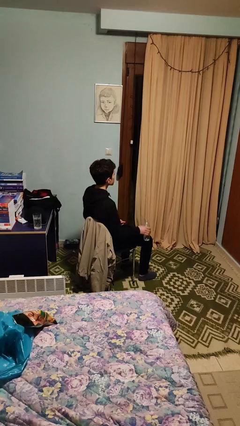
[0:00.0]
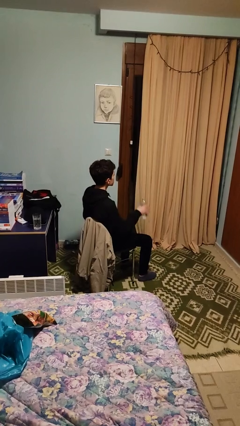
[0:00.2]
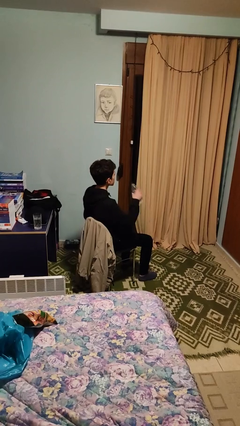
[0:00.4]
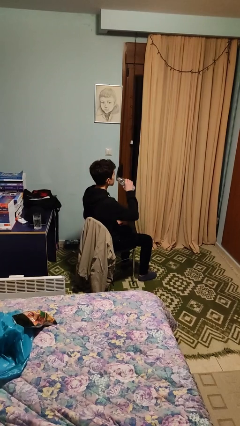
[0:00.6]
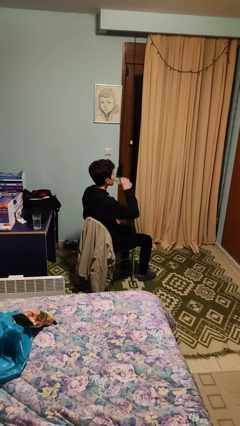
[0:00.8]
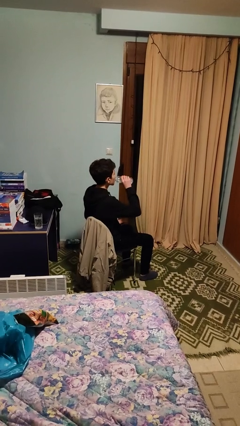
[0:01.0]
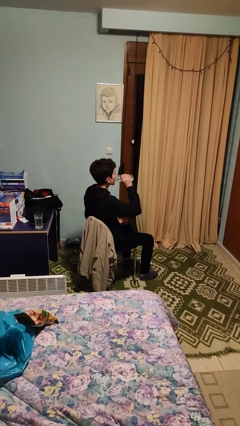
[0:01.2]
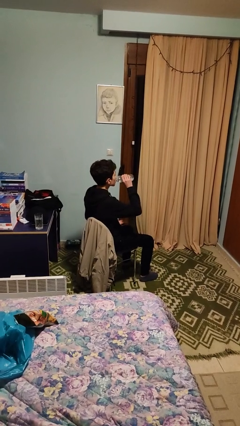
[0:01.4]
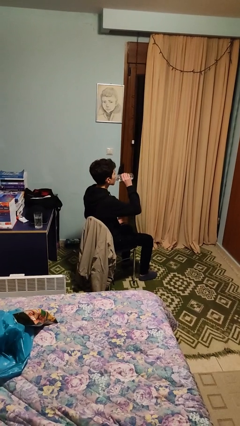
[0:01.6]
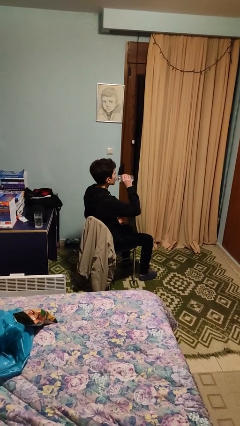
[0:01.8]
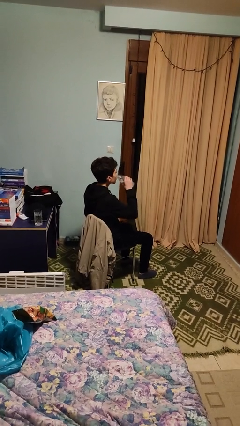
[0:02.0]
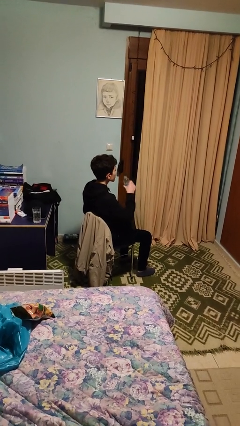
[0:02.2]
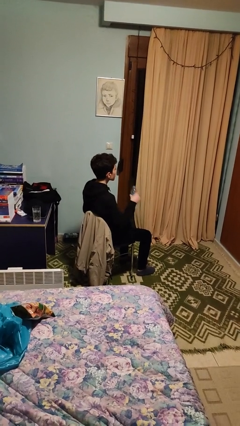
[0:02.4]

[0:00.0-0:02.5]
person drinks from bottle

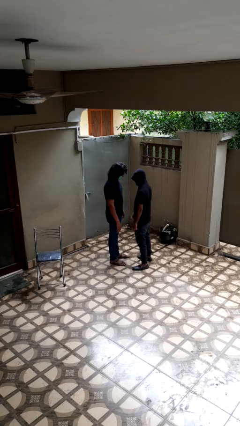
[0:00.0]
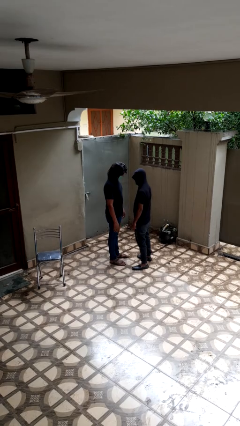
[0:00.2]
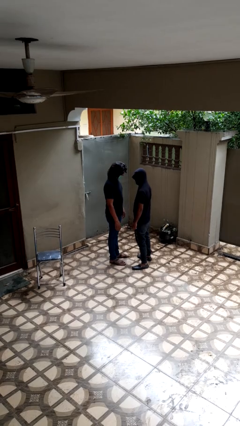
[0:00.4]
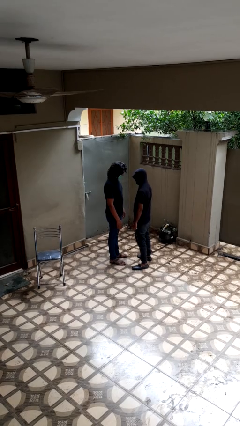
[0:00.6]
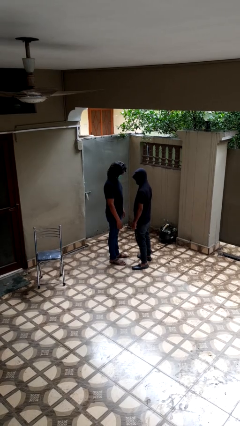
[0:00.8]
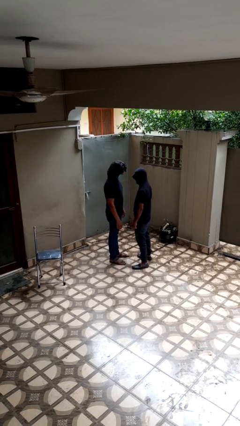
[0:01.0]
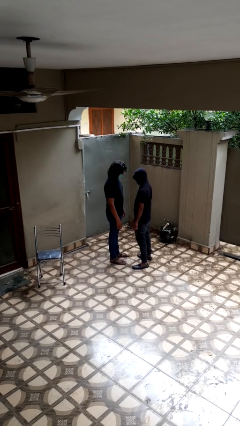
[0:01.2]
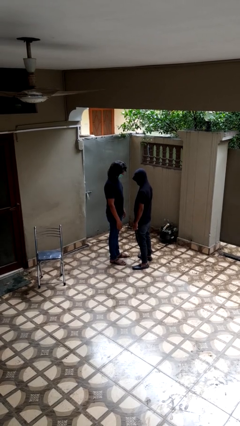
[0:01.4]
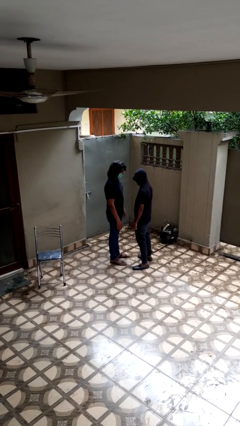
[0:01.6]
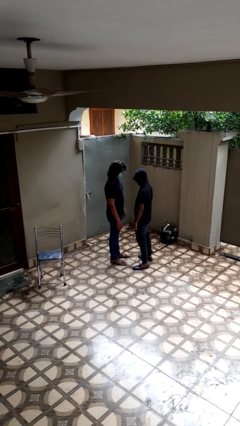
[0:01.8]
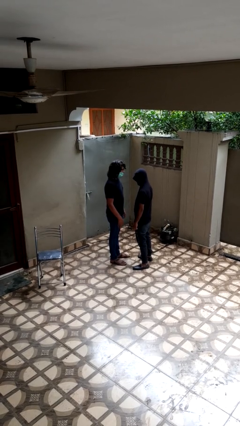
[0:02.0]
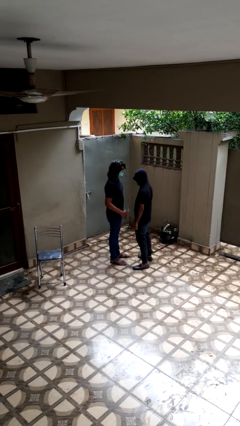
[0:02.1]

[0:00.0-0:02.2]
person highfives hand

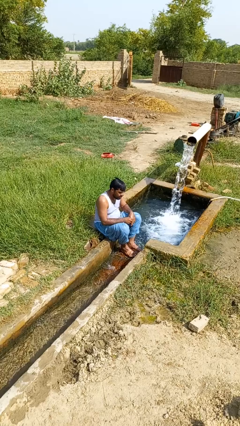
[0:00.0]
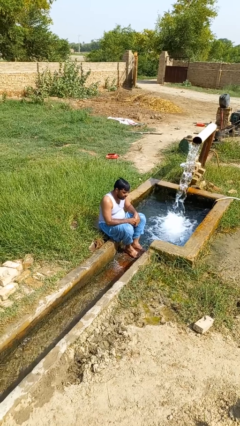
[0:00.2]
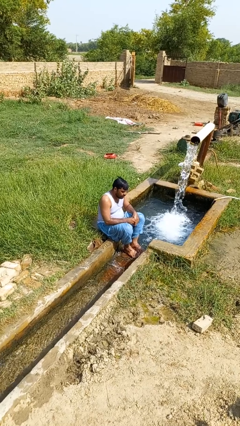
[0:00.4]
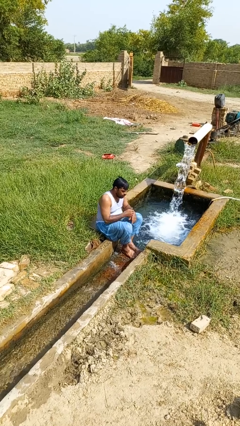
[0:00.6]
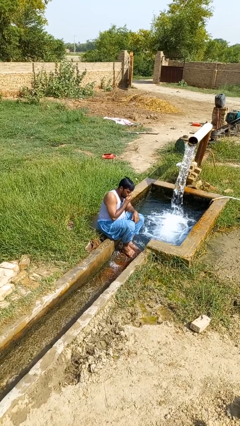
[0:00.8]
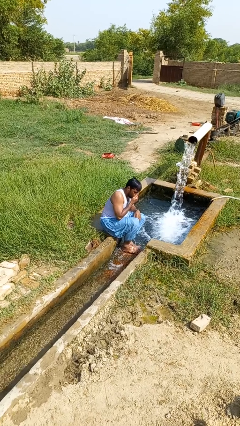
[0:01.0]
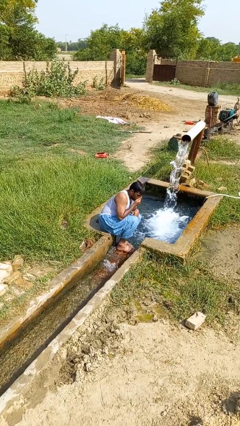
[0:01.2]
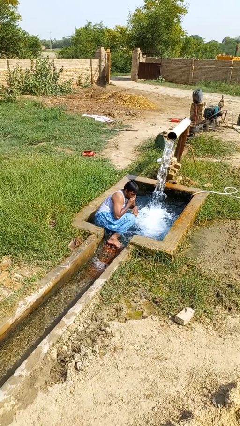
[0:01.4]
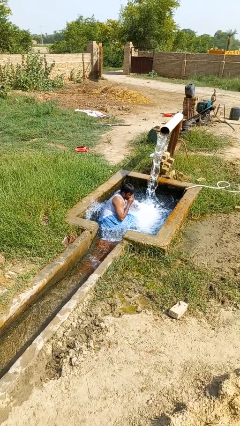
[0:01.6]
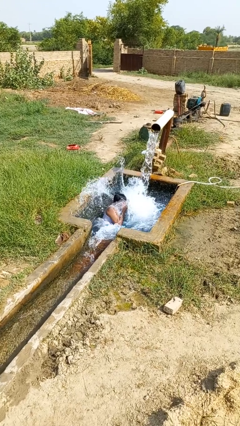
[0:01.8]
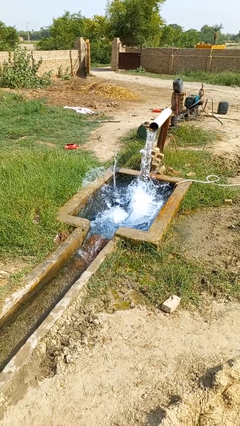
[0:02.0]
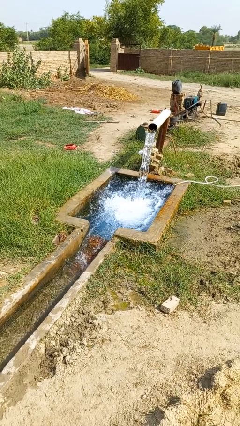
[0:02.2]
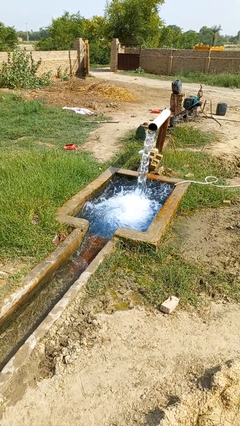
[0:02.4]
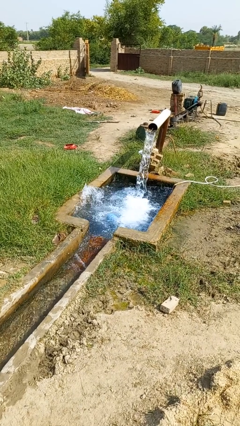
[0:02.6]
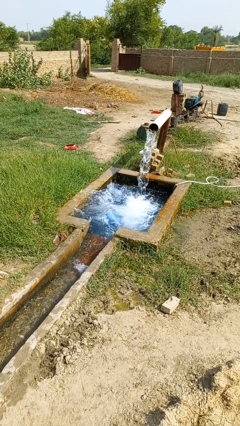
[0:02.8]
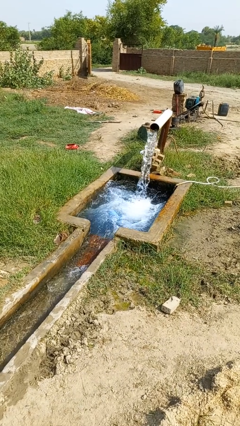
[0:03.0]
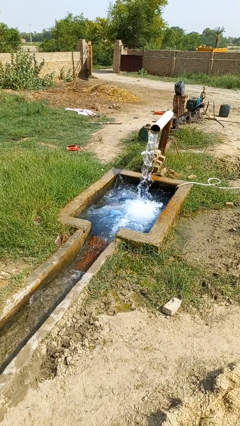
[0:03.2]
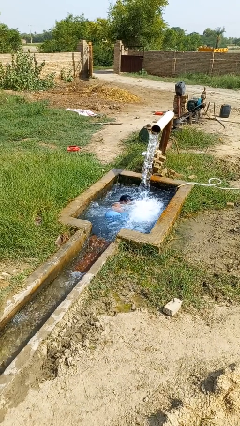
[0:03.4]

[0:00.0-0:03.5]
person falls into pool

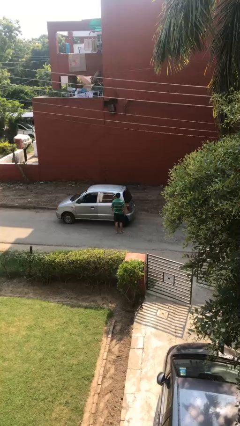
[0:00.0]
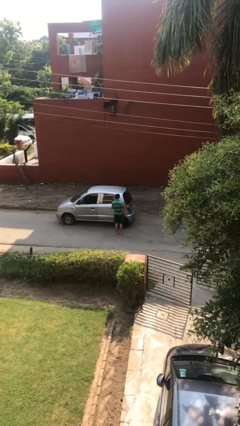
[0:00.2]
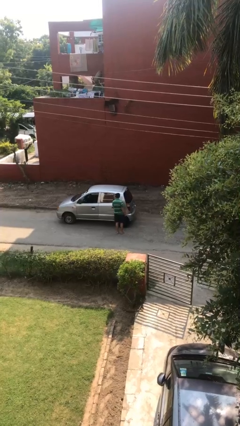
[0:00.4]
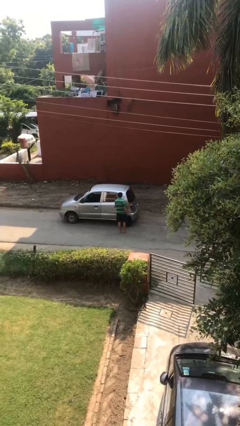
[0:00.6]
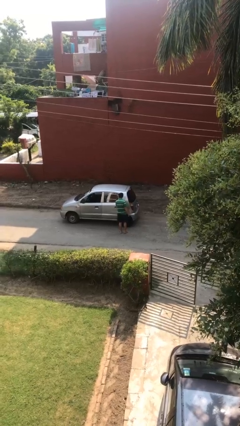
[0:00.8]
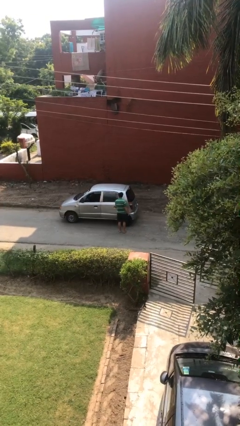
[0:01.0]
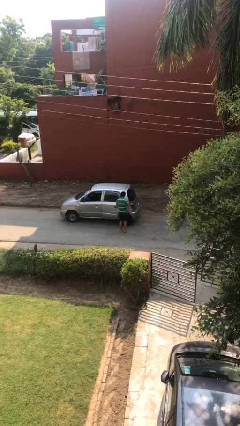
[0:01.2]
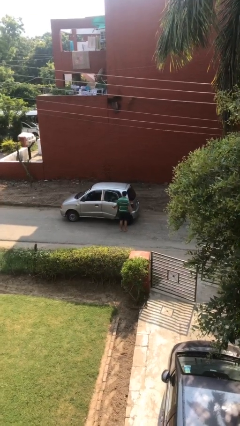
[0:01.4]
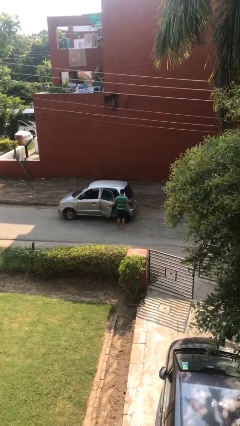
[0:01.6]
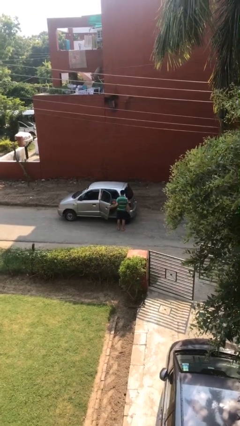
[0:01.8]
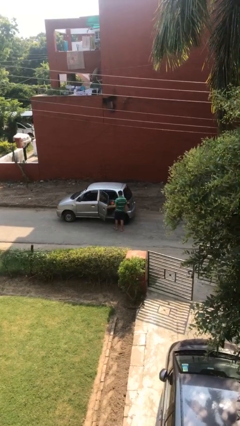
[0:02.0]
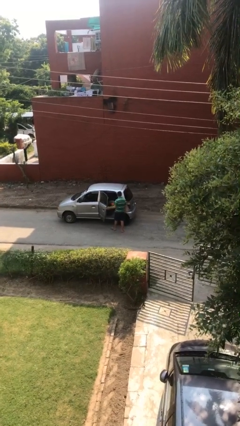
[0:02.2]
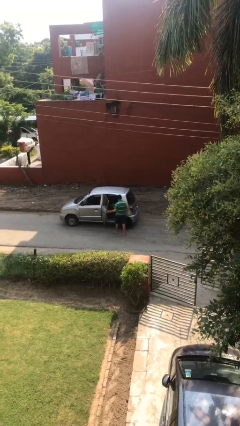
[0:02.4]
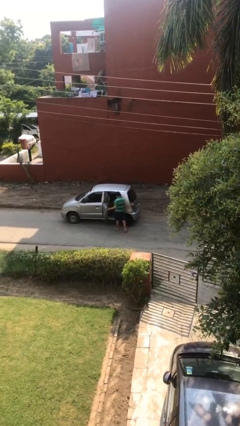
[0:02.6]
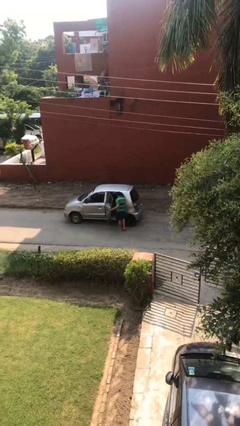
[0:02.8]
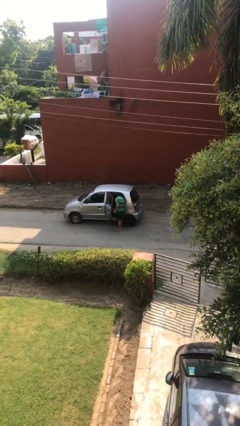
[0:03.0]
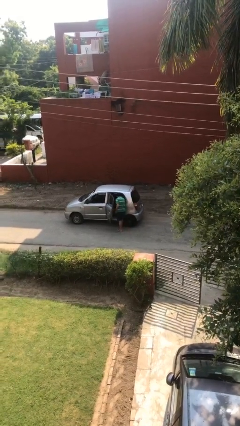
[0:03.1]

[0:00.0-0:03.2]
person opens car door

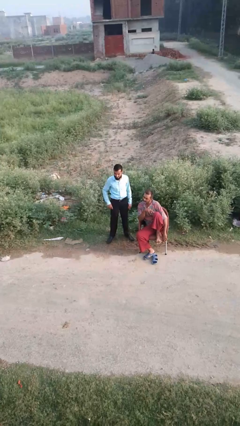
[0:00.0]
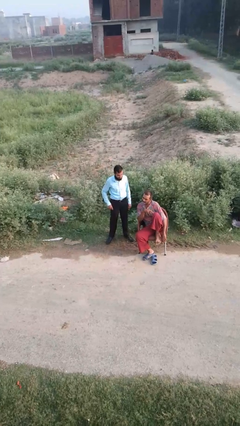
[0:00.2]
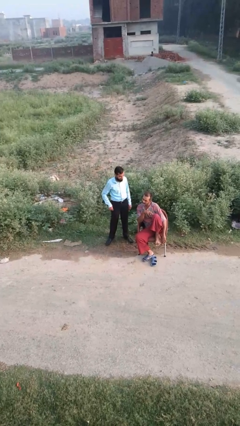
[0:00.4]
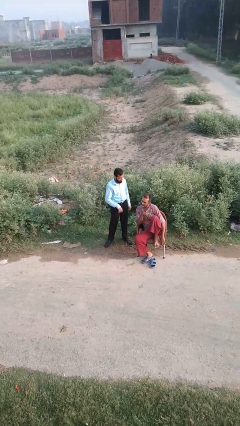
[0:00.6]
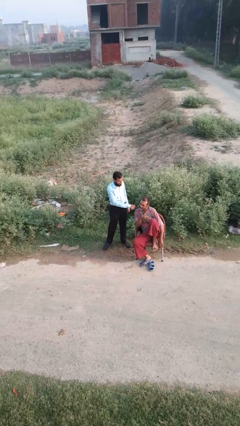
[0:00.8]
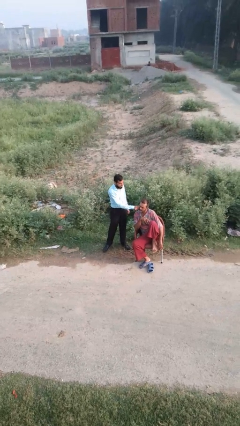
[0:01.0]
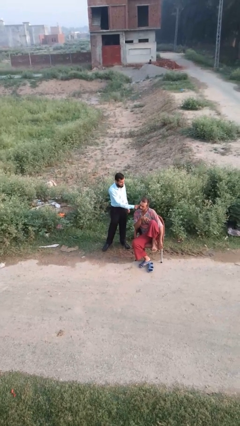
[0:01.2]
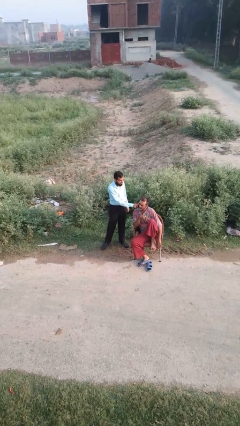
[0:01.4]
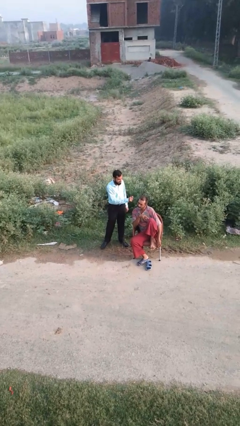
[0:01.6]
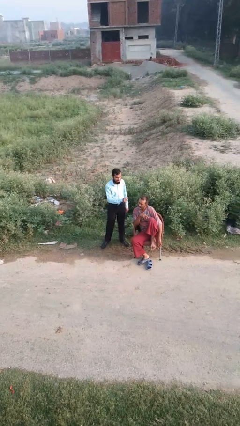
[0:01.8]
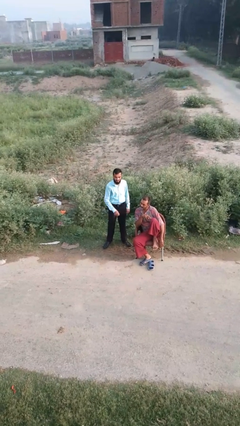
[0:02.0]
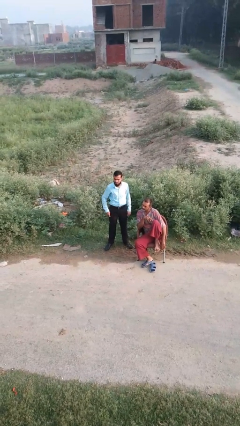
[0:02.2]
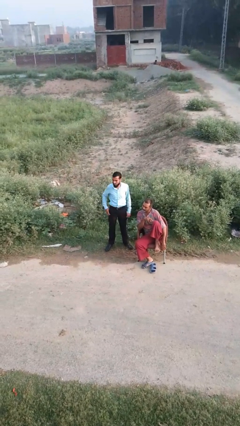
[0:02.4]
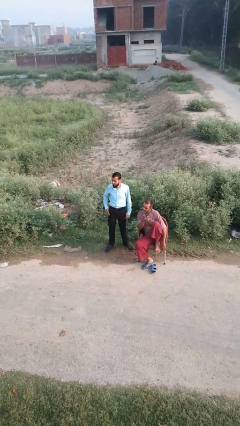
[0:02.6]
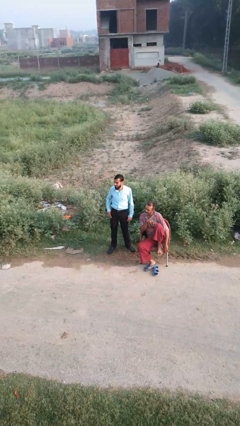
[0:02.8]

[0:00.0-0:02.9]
person touches face of person

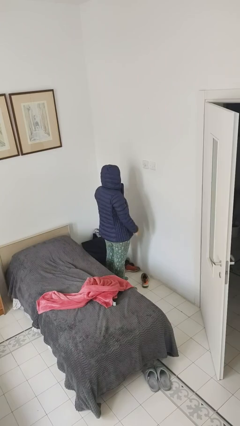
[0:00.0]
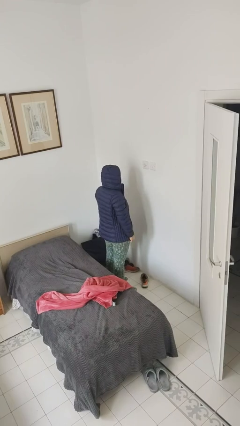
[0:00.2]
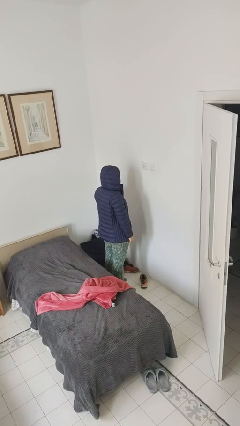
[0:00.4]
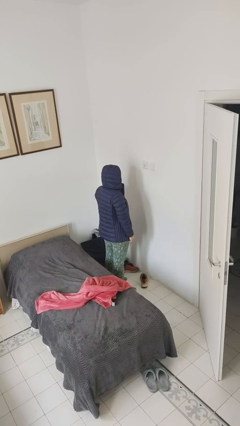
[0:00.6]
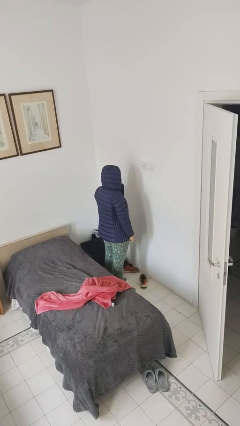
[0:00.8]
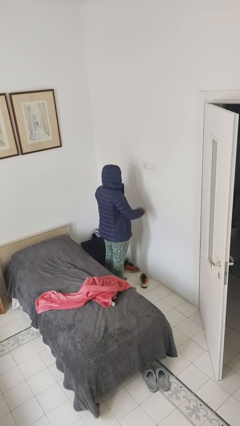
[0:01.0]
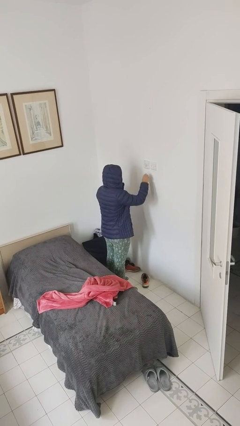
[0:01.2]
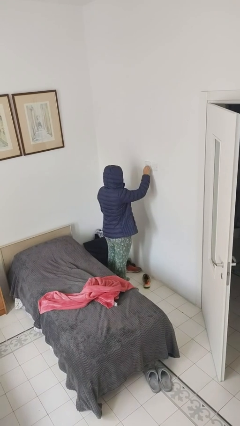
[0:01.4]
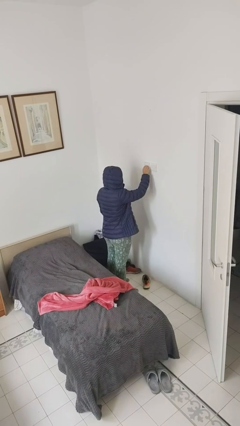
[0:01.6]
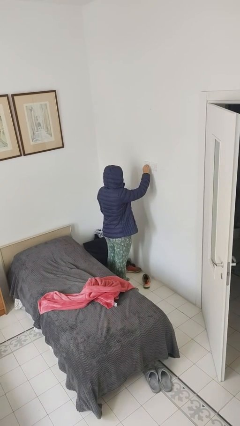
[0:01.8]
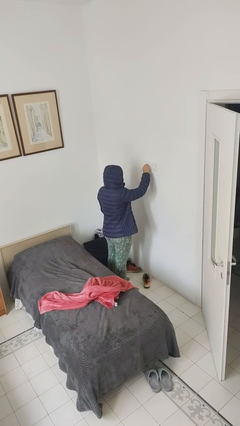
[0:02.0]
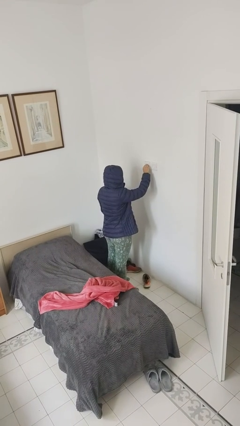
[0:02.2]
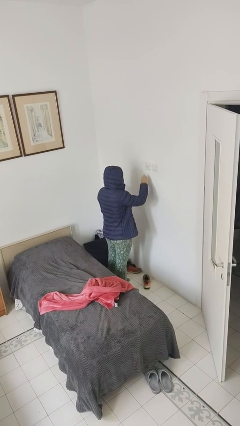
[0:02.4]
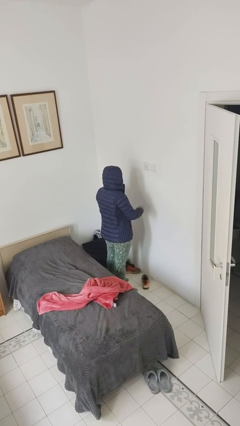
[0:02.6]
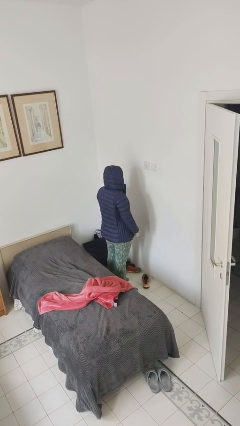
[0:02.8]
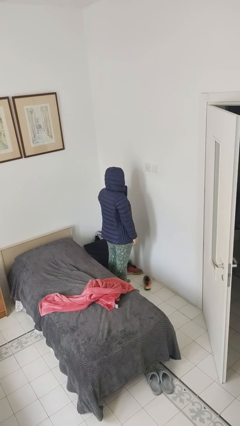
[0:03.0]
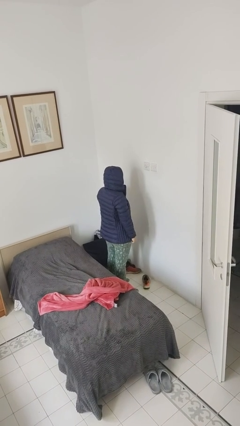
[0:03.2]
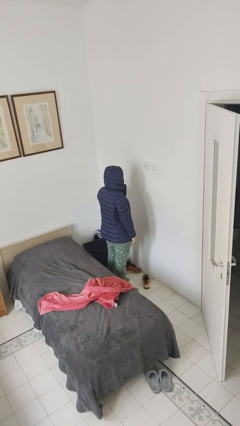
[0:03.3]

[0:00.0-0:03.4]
person turns off fan
